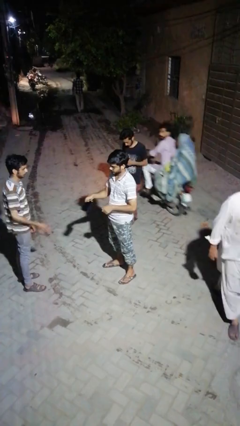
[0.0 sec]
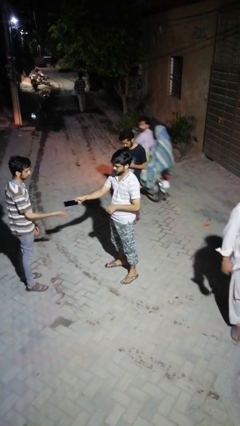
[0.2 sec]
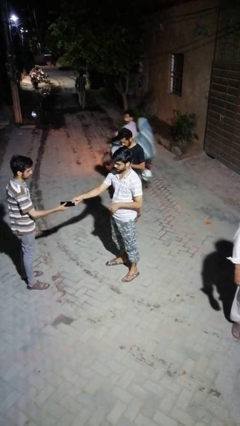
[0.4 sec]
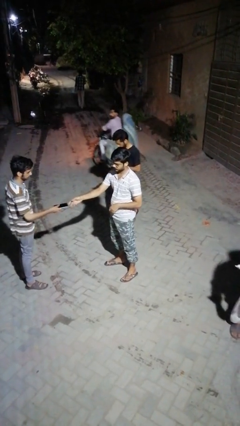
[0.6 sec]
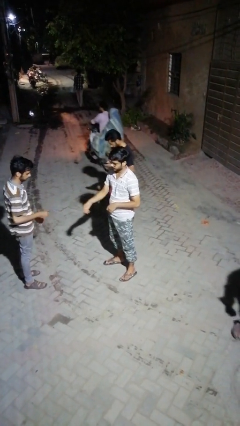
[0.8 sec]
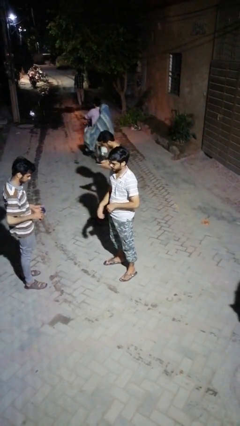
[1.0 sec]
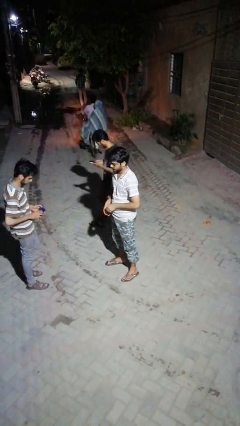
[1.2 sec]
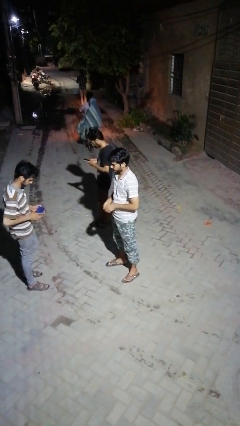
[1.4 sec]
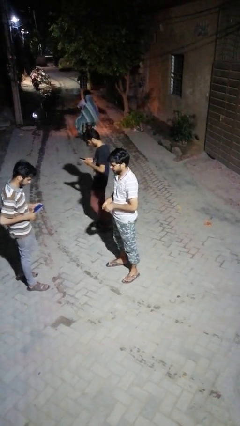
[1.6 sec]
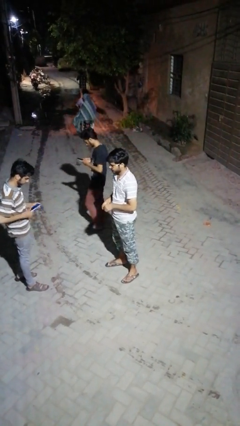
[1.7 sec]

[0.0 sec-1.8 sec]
person transfers object to person

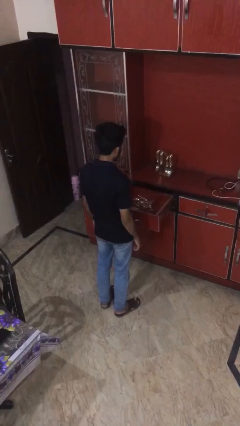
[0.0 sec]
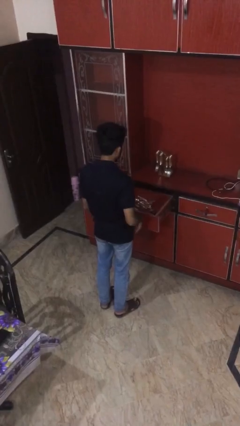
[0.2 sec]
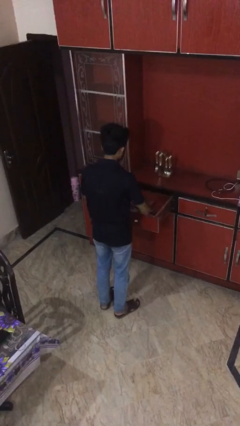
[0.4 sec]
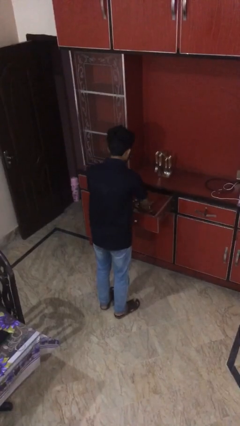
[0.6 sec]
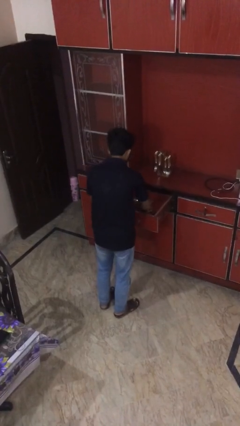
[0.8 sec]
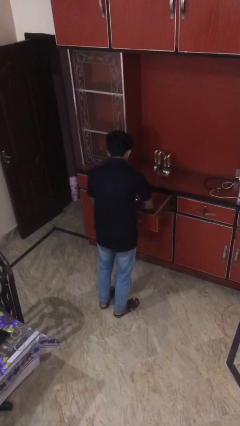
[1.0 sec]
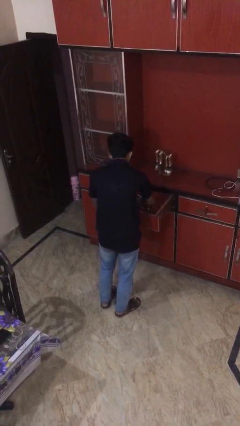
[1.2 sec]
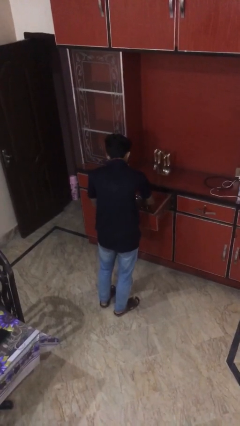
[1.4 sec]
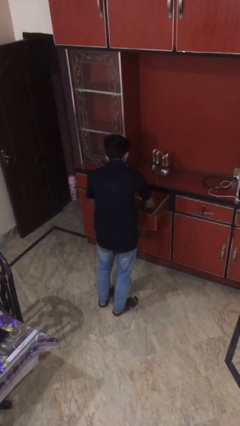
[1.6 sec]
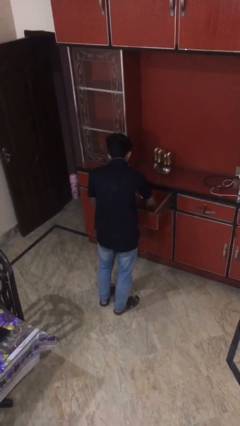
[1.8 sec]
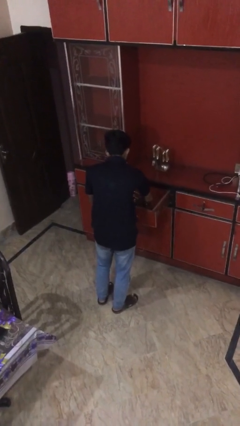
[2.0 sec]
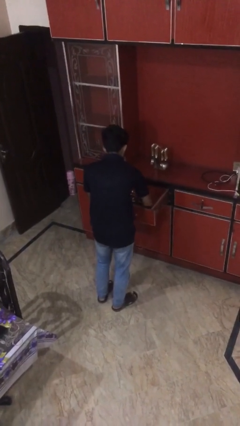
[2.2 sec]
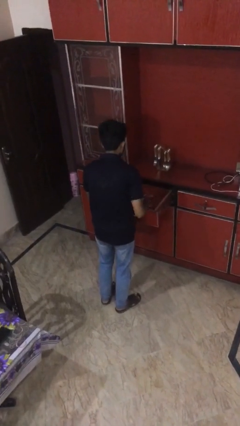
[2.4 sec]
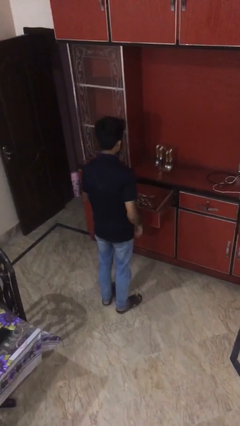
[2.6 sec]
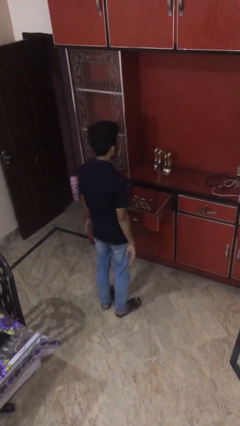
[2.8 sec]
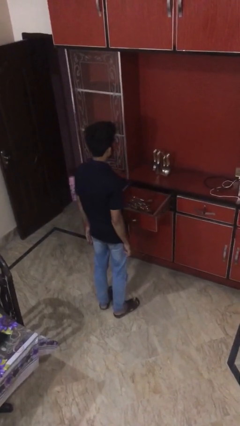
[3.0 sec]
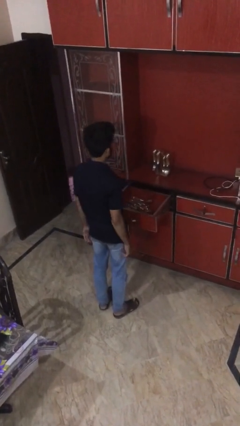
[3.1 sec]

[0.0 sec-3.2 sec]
person searches in kitchen drawer

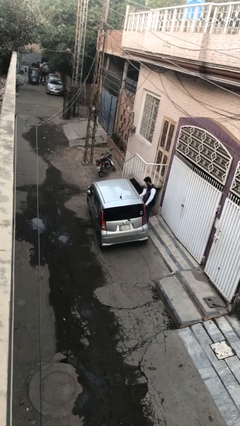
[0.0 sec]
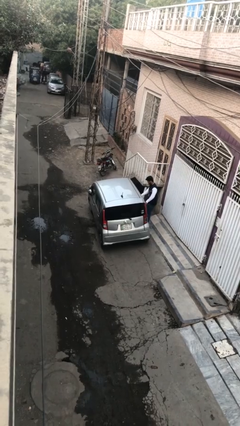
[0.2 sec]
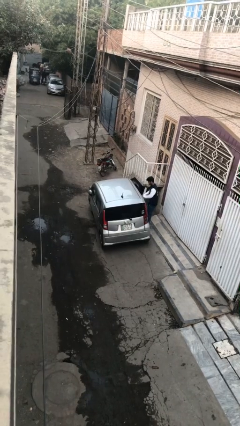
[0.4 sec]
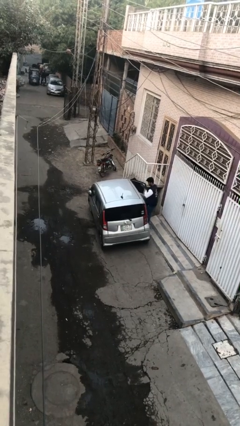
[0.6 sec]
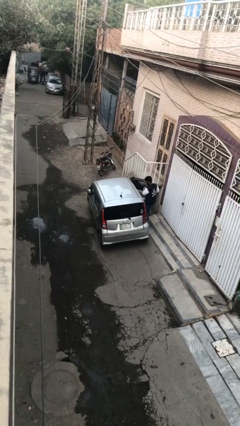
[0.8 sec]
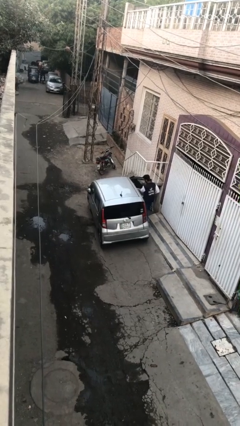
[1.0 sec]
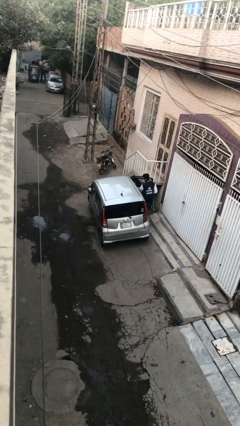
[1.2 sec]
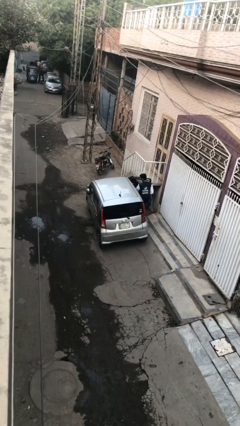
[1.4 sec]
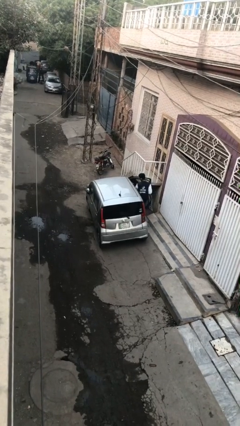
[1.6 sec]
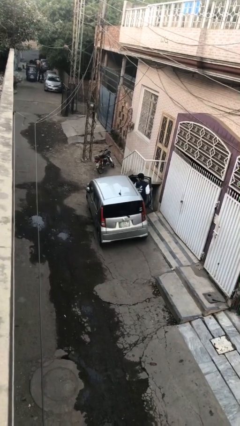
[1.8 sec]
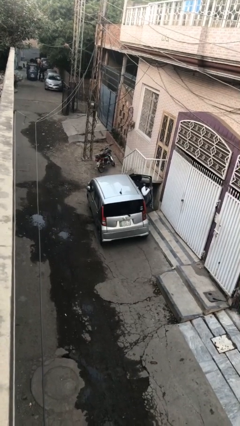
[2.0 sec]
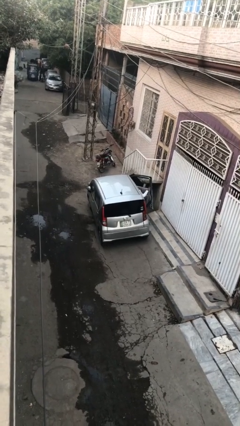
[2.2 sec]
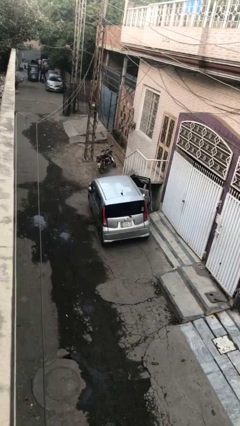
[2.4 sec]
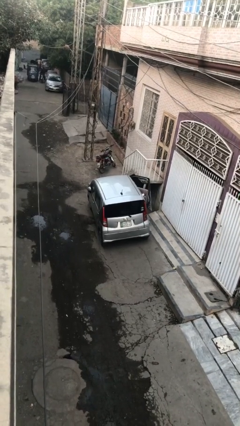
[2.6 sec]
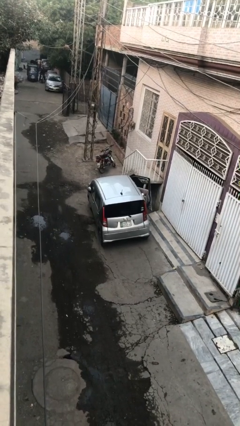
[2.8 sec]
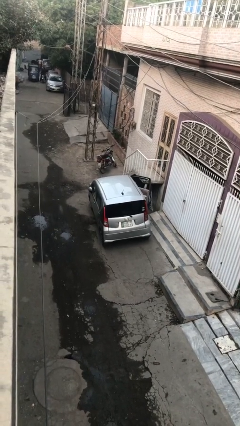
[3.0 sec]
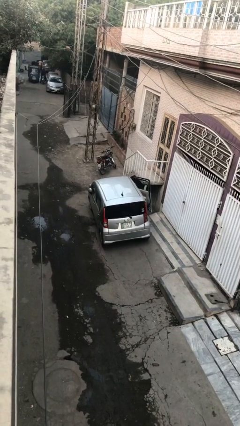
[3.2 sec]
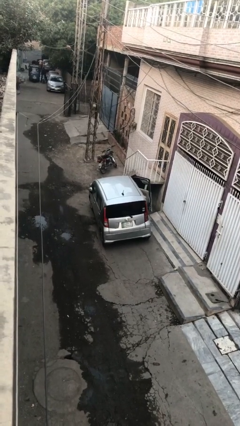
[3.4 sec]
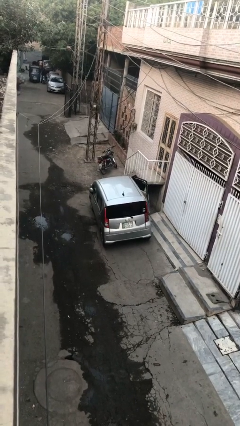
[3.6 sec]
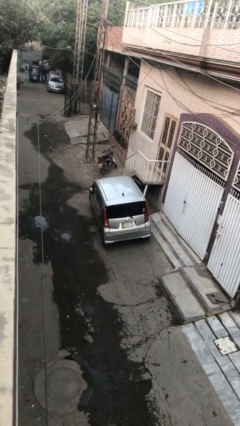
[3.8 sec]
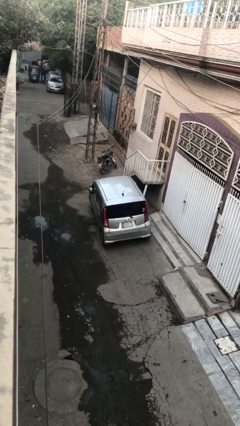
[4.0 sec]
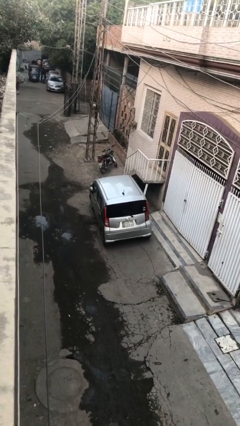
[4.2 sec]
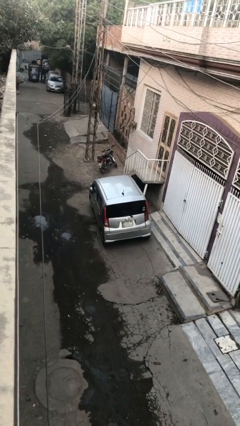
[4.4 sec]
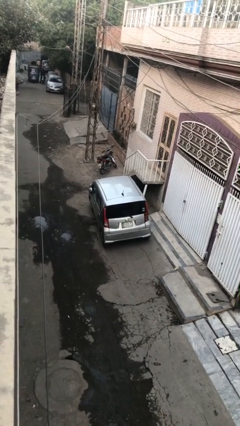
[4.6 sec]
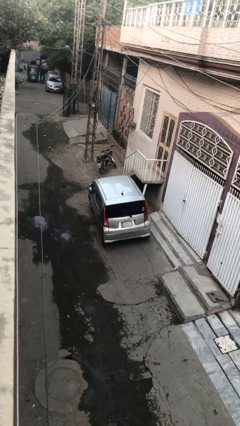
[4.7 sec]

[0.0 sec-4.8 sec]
car picks up person

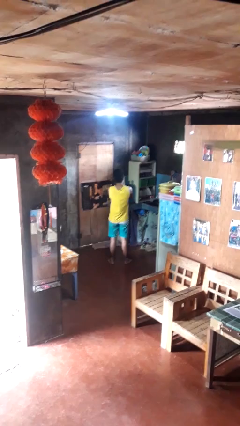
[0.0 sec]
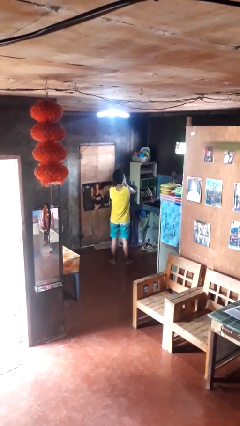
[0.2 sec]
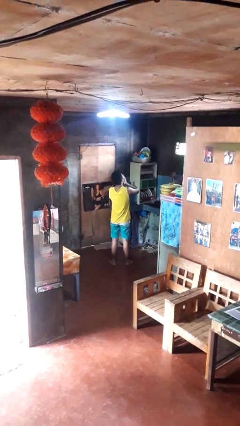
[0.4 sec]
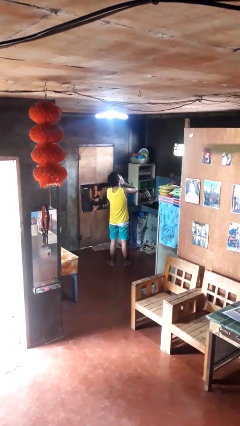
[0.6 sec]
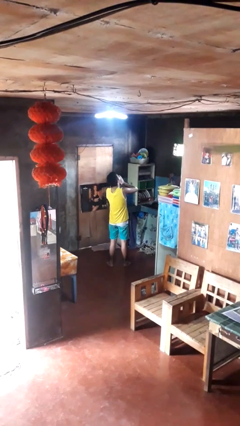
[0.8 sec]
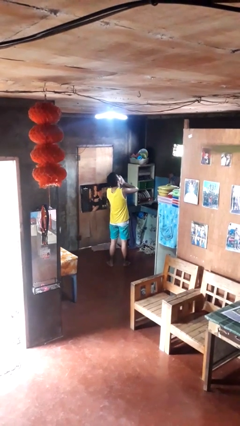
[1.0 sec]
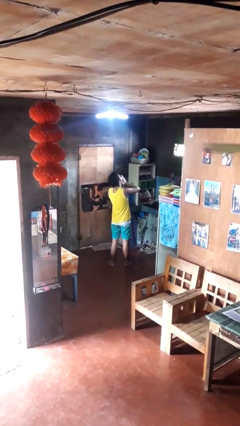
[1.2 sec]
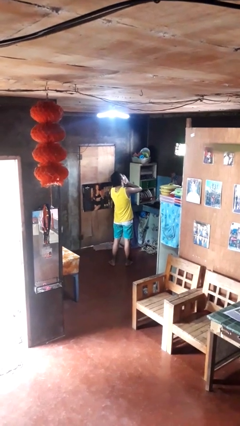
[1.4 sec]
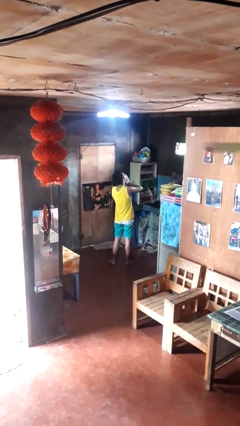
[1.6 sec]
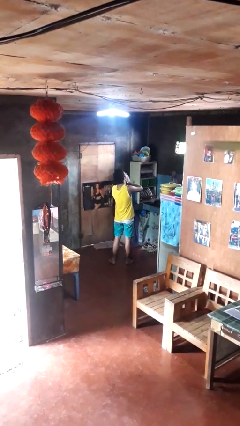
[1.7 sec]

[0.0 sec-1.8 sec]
person yawns

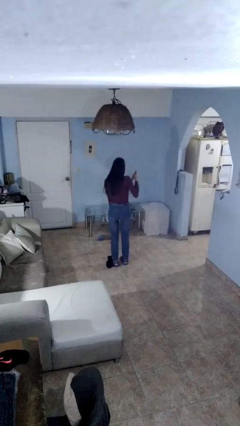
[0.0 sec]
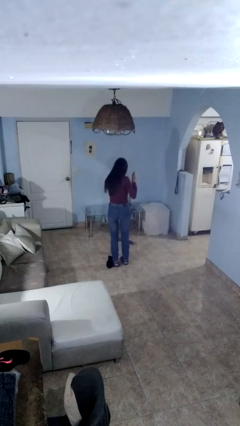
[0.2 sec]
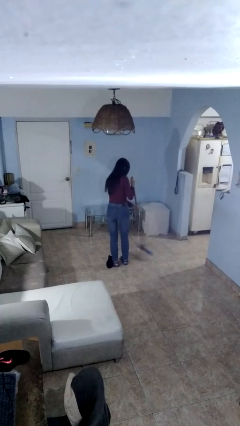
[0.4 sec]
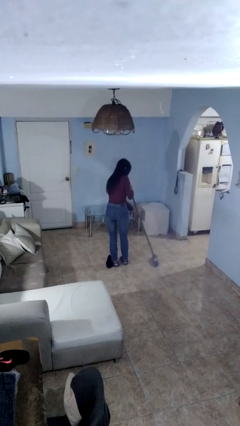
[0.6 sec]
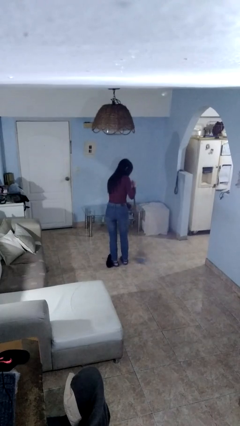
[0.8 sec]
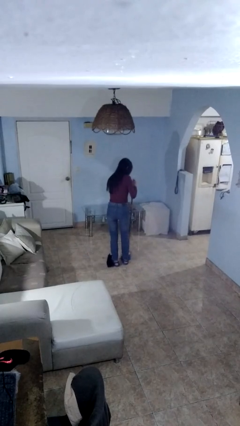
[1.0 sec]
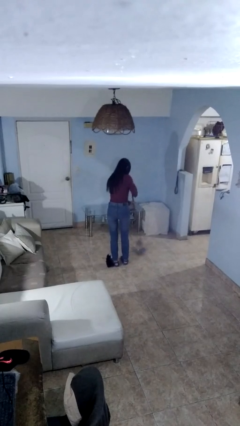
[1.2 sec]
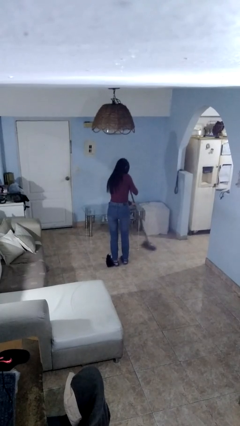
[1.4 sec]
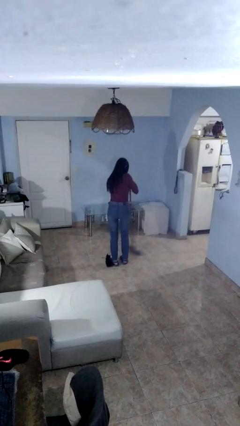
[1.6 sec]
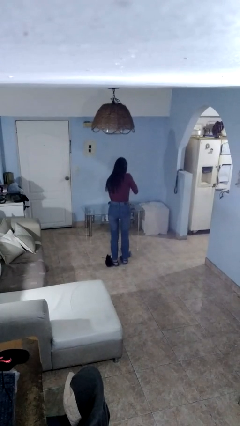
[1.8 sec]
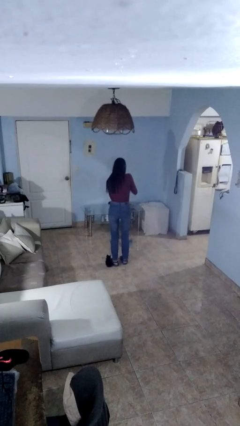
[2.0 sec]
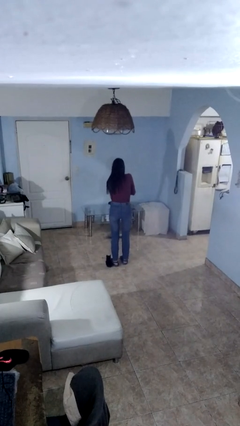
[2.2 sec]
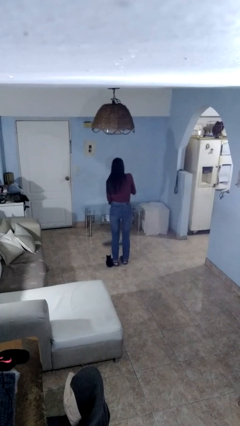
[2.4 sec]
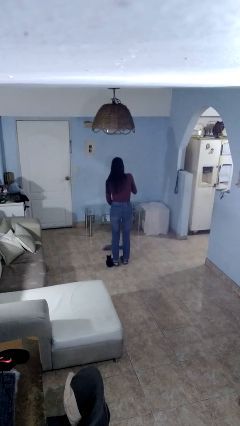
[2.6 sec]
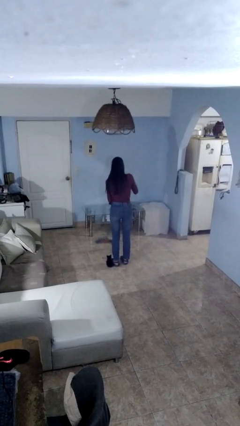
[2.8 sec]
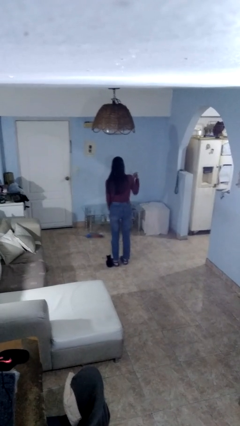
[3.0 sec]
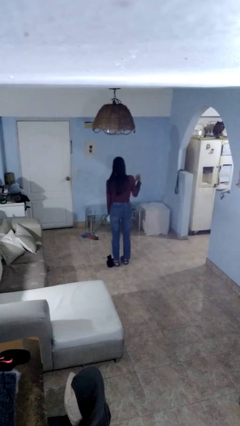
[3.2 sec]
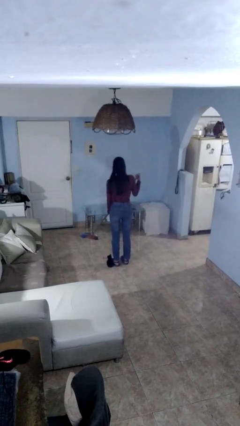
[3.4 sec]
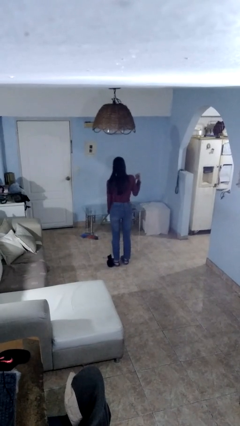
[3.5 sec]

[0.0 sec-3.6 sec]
person sweeps floor

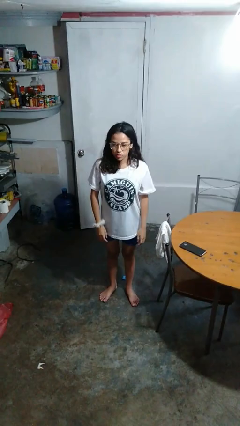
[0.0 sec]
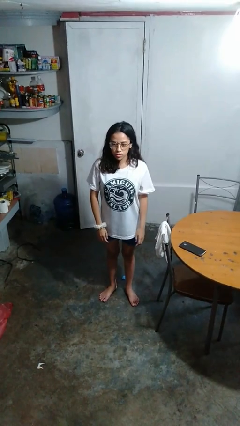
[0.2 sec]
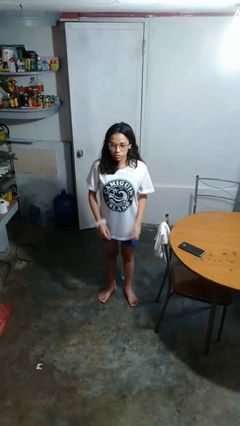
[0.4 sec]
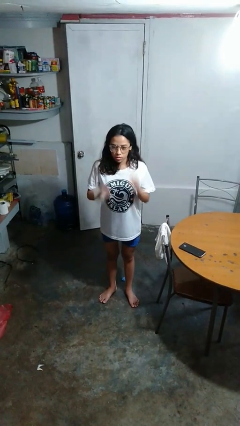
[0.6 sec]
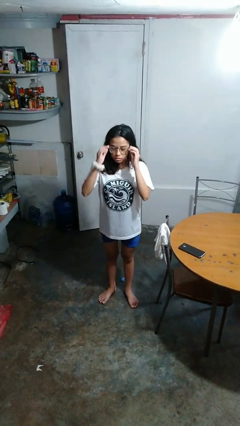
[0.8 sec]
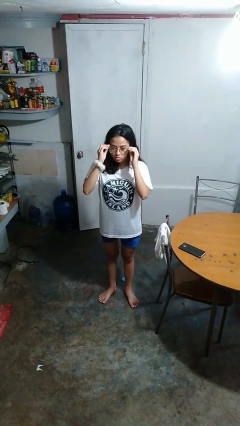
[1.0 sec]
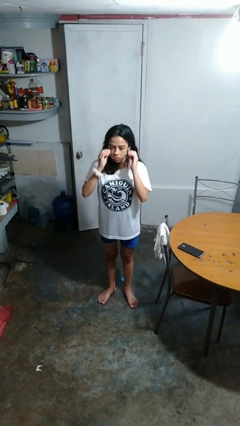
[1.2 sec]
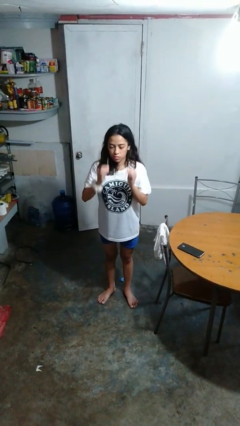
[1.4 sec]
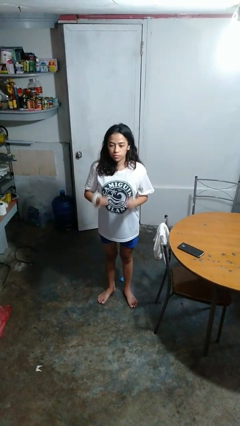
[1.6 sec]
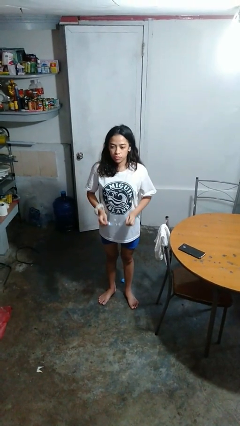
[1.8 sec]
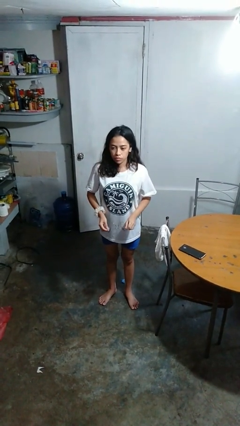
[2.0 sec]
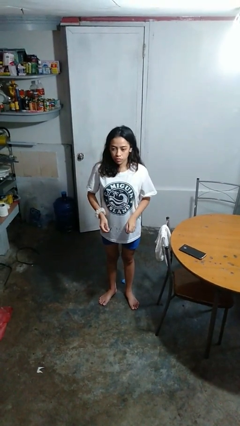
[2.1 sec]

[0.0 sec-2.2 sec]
person takes off glasses
